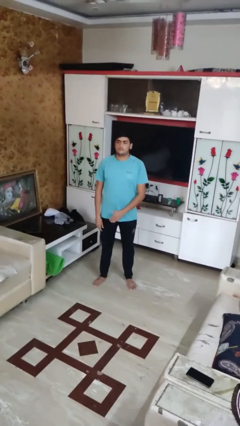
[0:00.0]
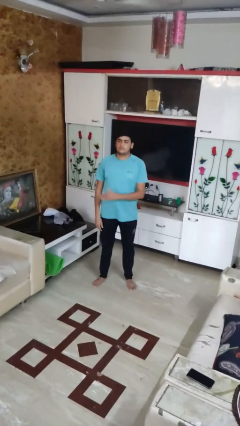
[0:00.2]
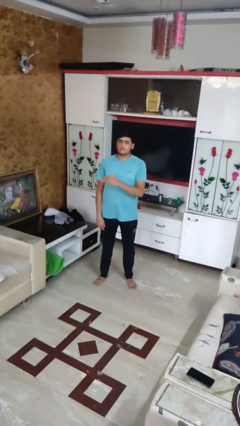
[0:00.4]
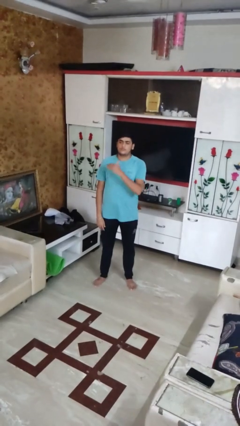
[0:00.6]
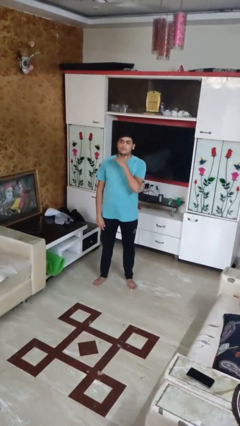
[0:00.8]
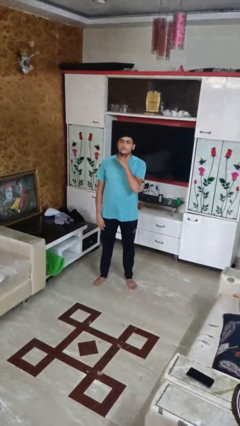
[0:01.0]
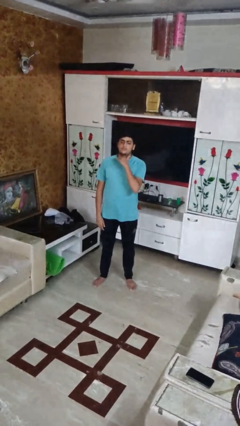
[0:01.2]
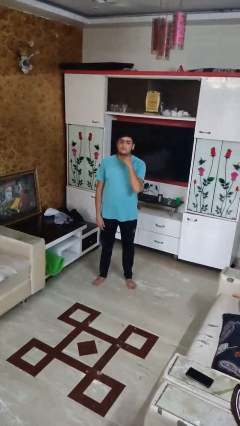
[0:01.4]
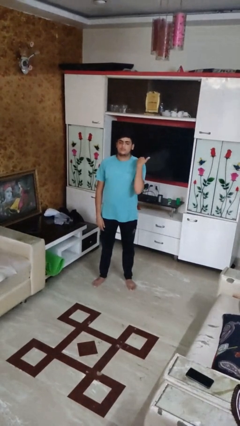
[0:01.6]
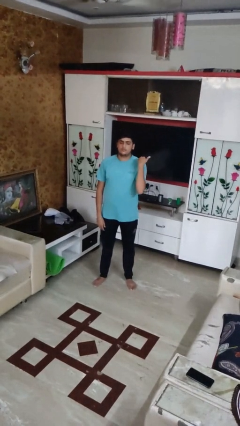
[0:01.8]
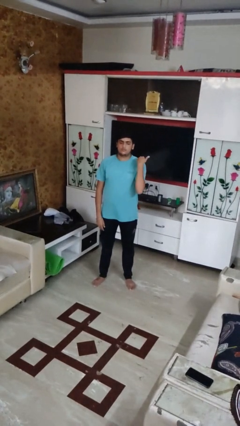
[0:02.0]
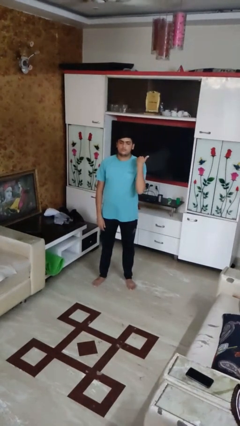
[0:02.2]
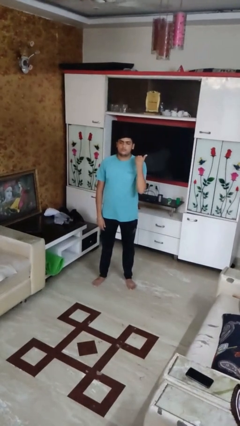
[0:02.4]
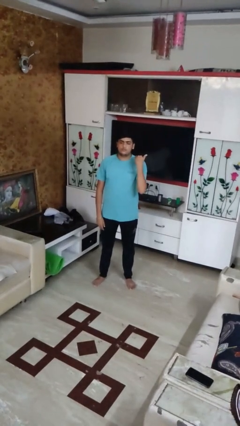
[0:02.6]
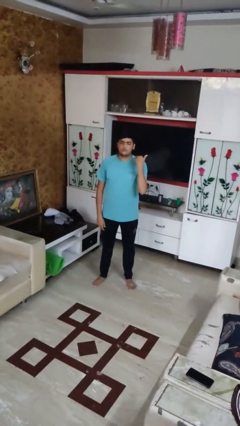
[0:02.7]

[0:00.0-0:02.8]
person gestures cut

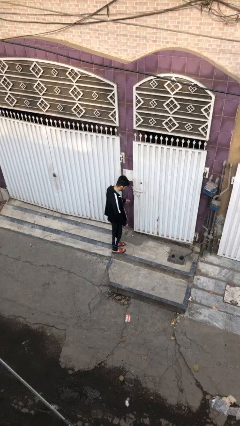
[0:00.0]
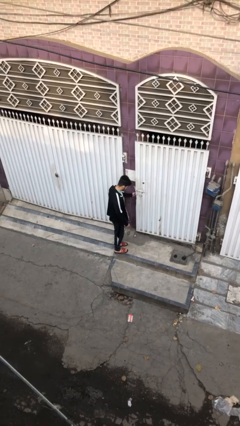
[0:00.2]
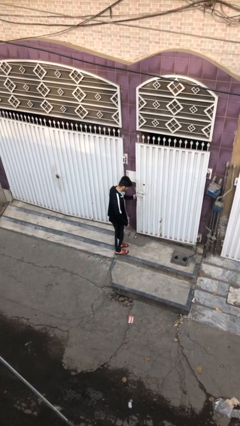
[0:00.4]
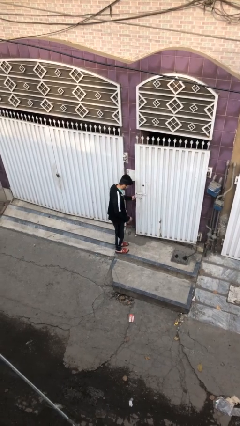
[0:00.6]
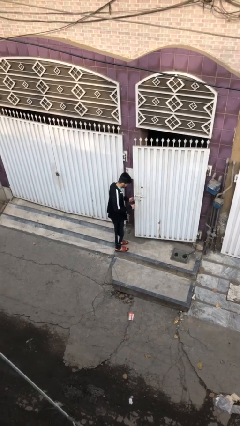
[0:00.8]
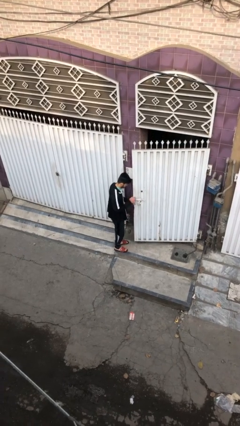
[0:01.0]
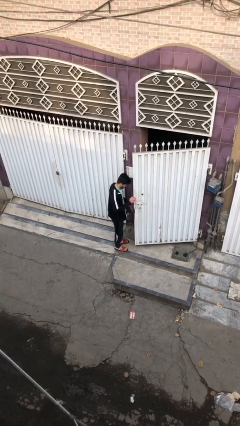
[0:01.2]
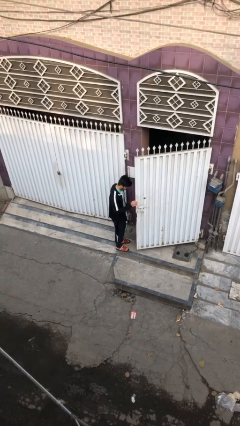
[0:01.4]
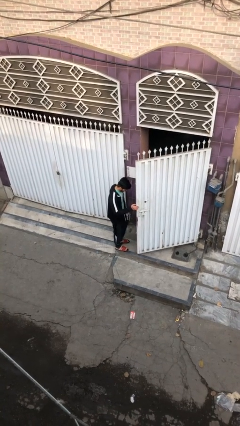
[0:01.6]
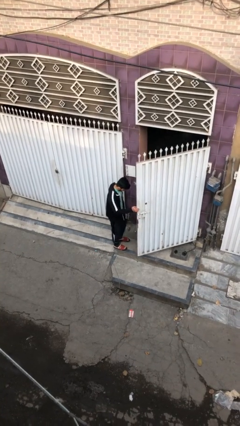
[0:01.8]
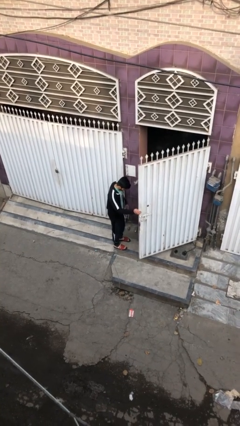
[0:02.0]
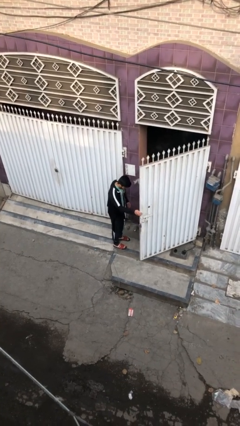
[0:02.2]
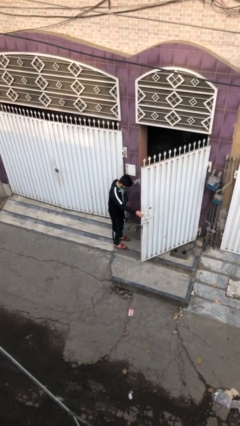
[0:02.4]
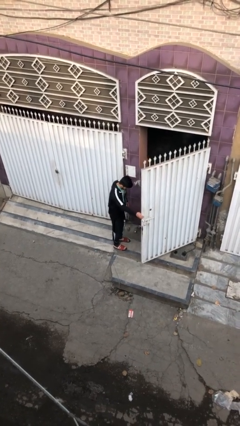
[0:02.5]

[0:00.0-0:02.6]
person opens facility door

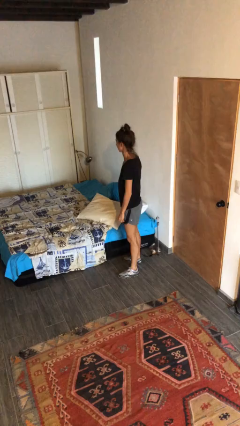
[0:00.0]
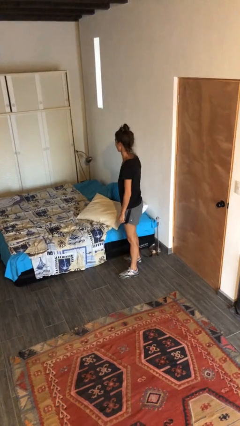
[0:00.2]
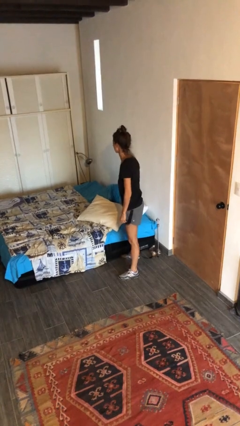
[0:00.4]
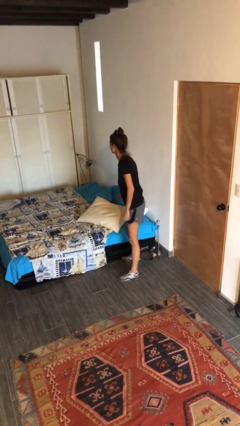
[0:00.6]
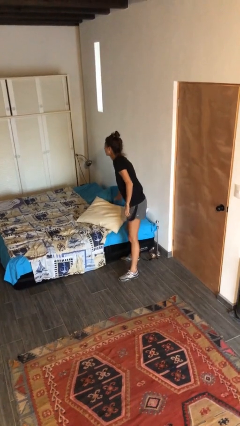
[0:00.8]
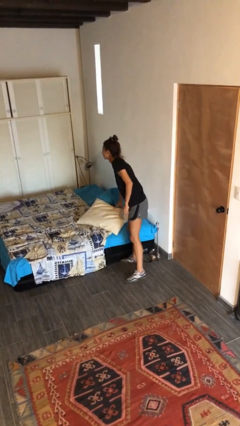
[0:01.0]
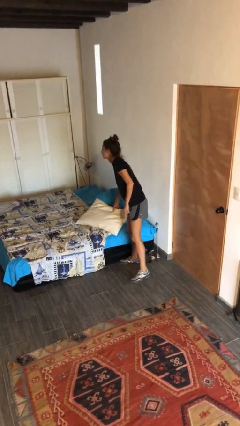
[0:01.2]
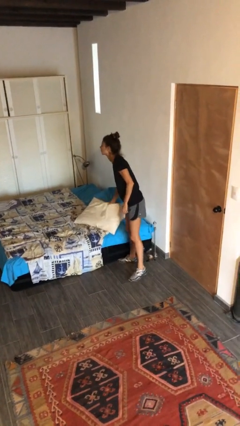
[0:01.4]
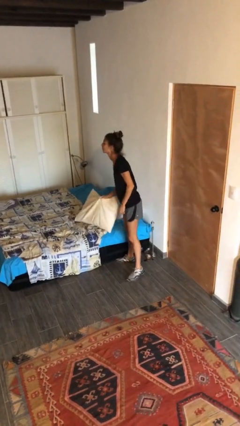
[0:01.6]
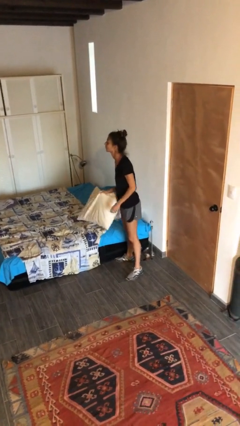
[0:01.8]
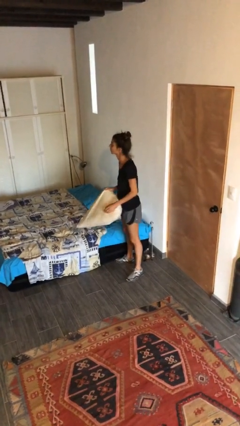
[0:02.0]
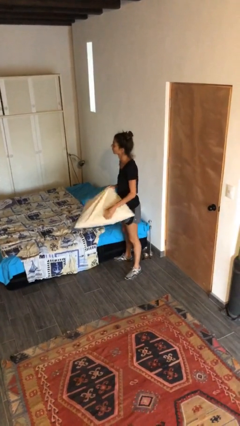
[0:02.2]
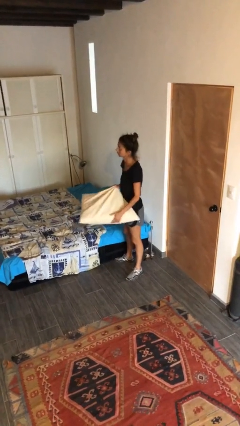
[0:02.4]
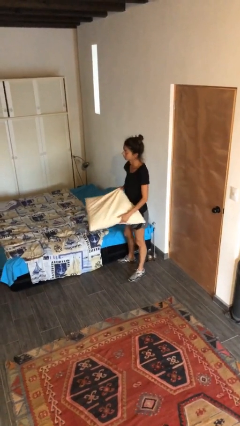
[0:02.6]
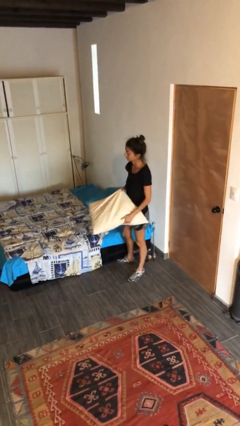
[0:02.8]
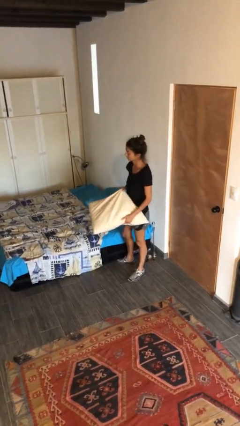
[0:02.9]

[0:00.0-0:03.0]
person picks up object from bed

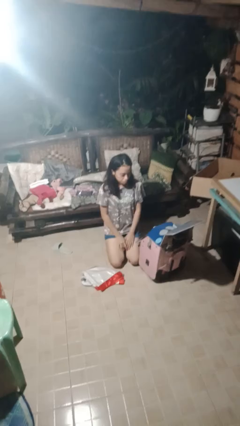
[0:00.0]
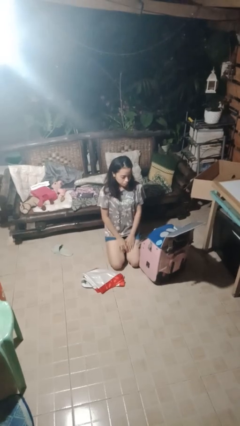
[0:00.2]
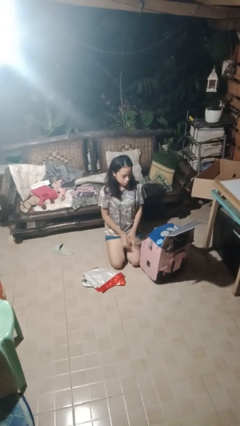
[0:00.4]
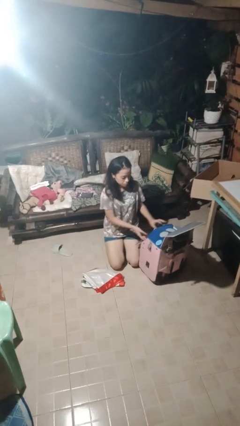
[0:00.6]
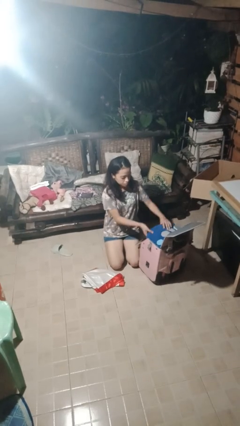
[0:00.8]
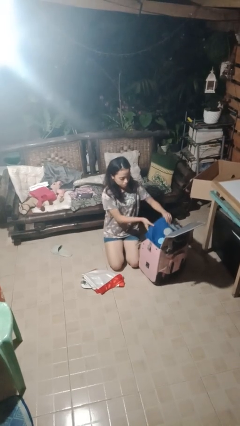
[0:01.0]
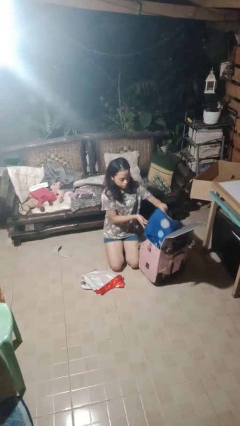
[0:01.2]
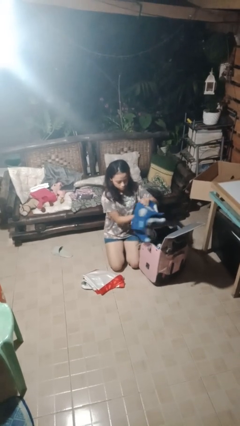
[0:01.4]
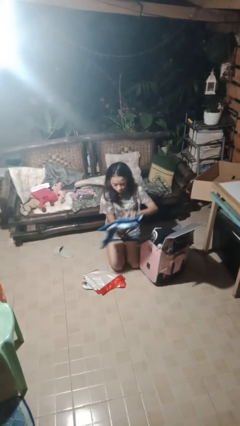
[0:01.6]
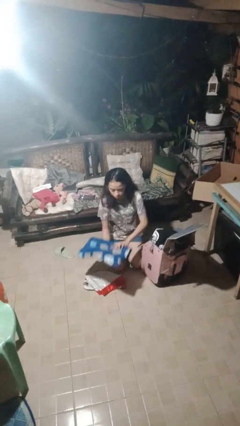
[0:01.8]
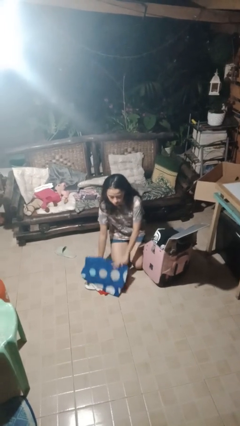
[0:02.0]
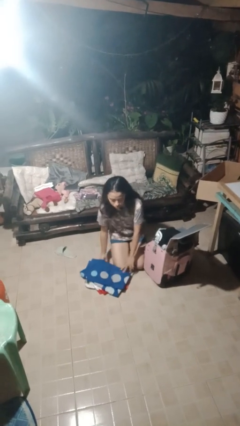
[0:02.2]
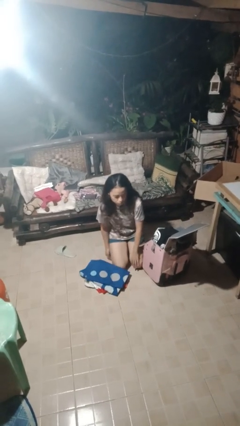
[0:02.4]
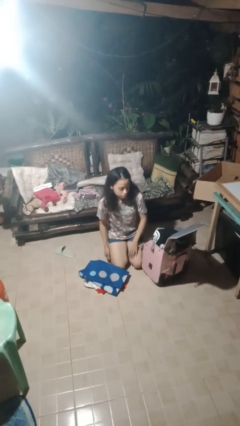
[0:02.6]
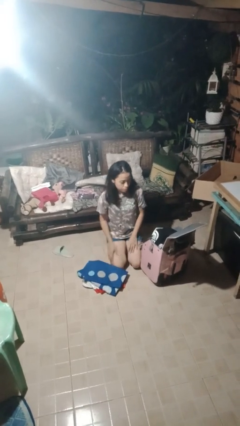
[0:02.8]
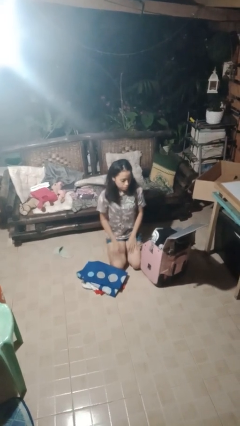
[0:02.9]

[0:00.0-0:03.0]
person unloads clothes from suitcase

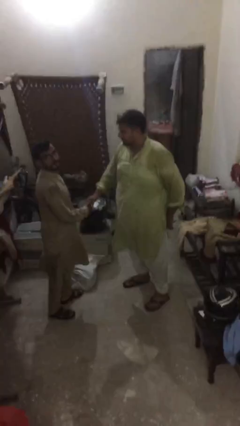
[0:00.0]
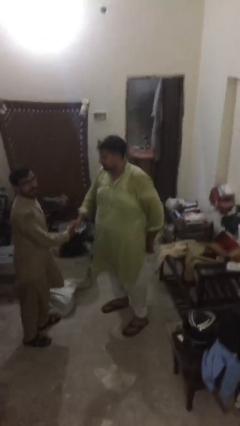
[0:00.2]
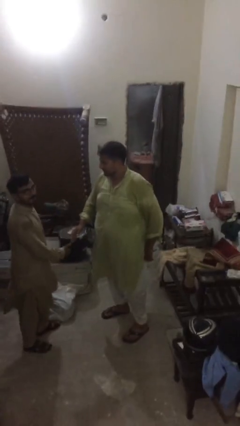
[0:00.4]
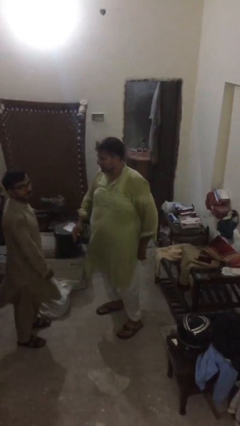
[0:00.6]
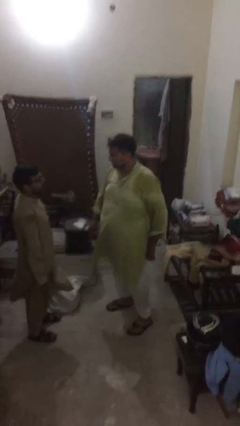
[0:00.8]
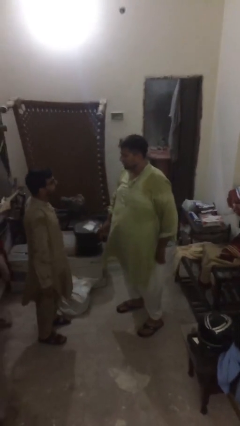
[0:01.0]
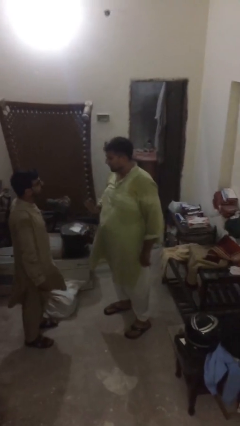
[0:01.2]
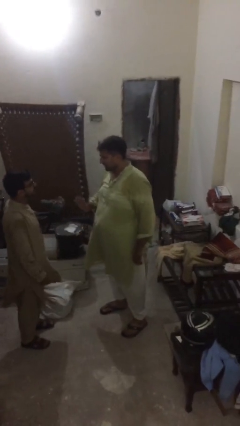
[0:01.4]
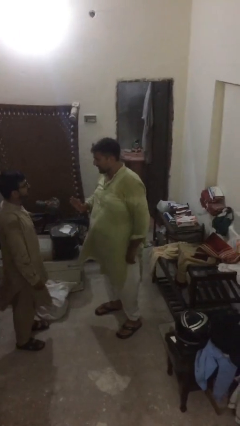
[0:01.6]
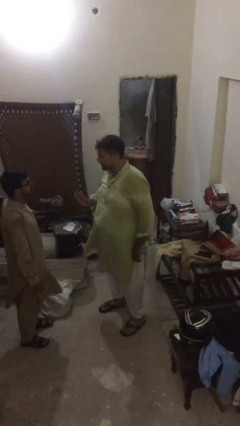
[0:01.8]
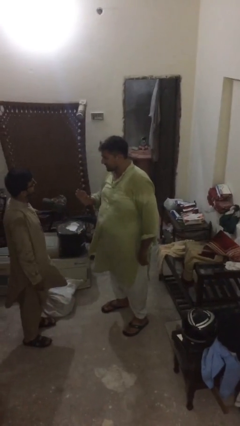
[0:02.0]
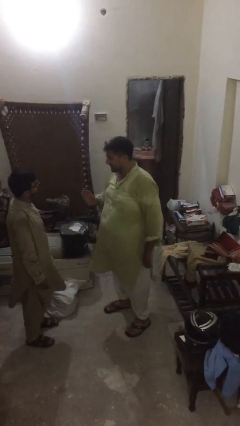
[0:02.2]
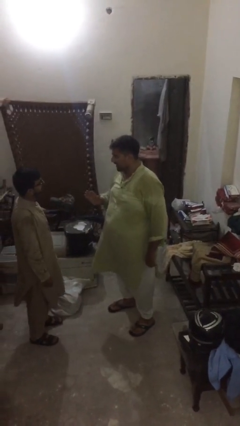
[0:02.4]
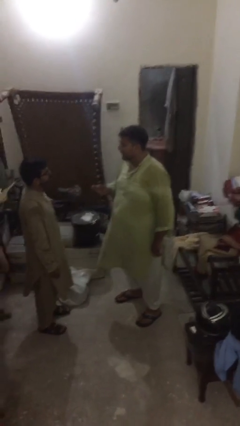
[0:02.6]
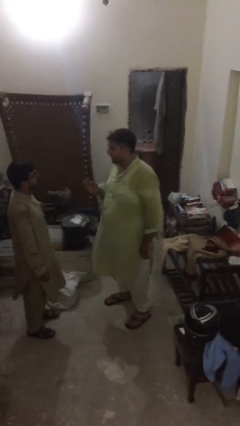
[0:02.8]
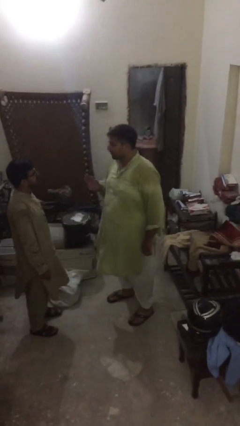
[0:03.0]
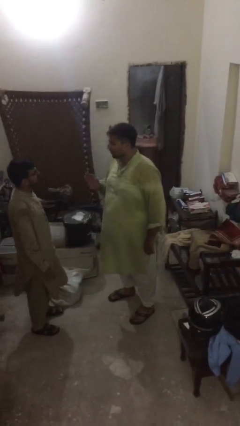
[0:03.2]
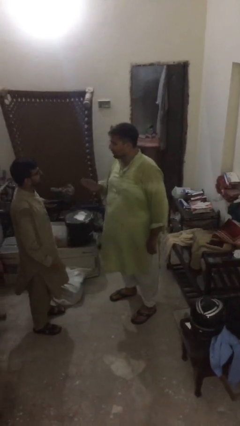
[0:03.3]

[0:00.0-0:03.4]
person talks to person

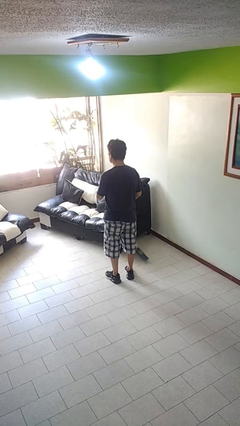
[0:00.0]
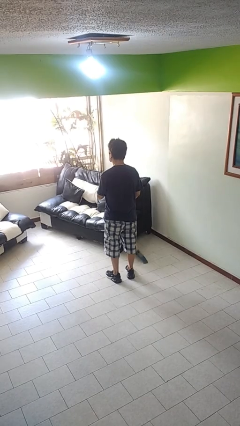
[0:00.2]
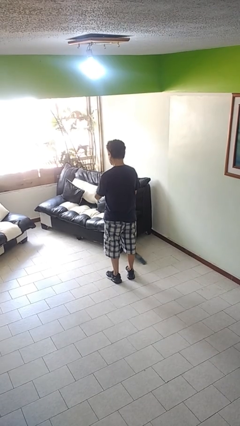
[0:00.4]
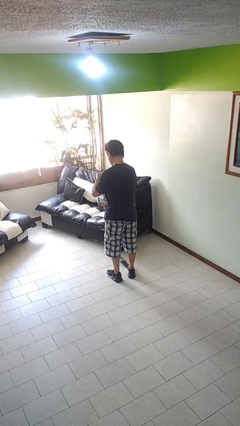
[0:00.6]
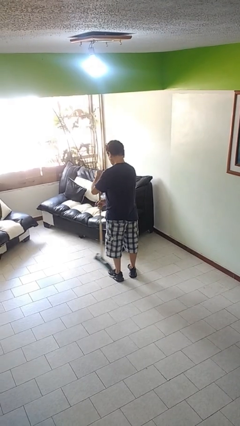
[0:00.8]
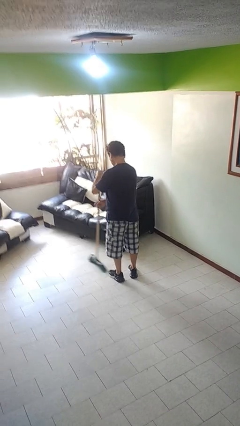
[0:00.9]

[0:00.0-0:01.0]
person sweeps floor

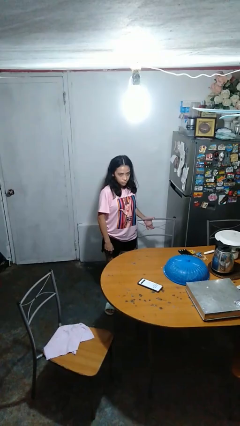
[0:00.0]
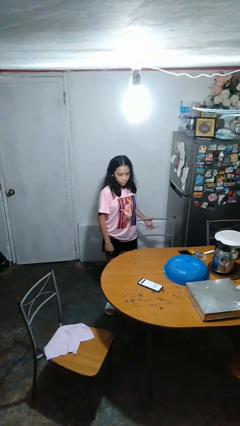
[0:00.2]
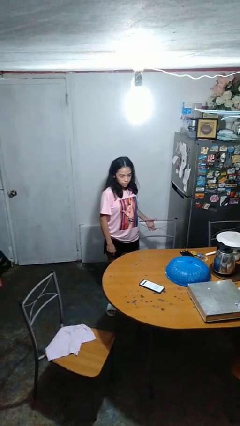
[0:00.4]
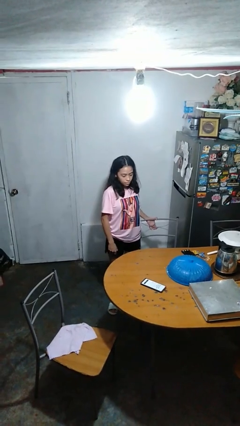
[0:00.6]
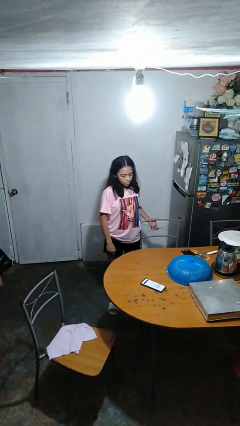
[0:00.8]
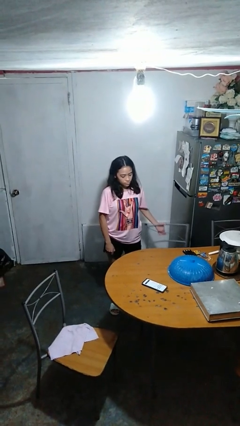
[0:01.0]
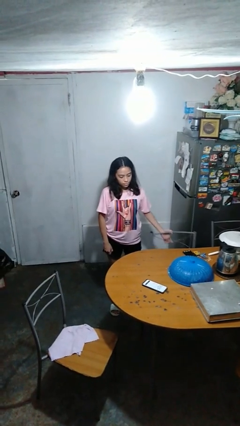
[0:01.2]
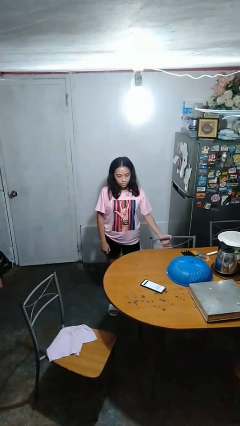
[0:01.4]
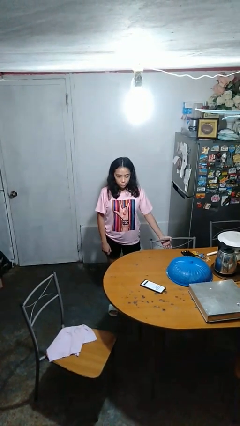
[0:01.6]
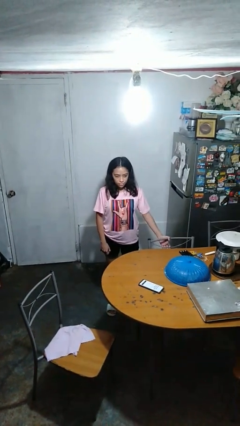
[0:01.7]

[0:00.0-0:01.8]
person pushes in chair
